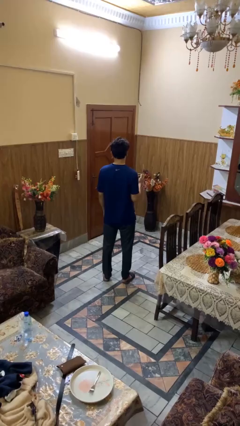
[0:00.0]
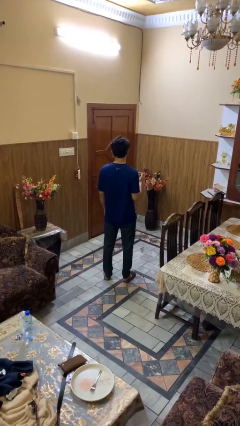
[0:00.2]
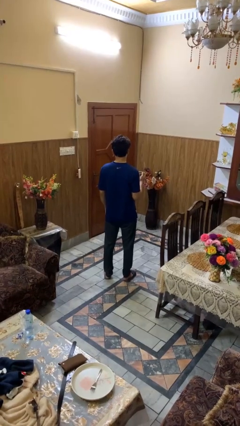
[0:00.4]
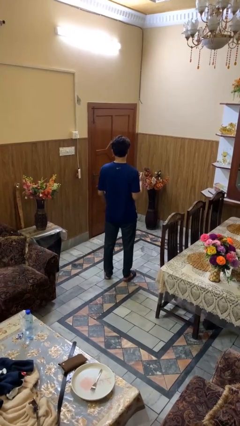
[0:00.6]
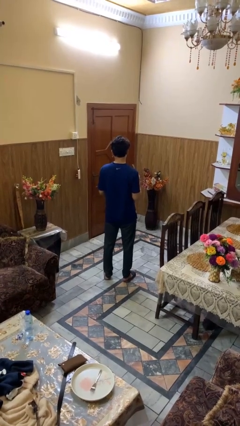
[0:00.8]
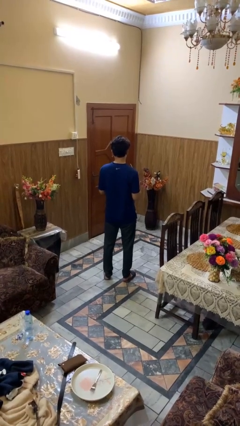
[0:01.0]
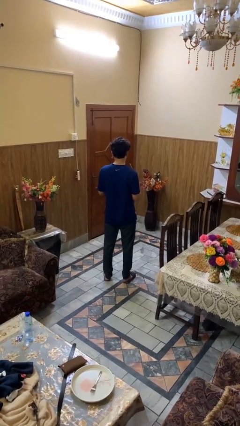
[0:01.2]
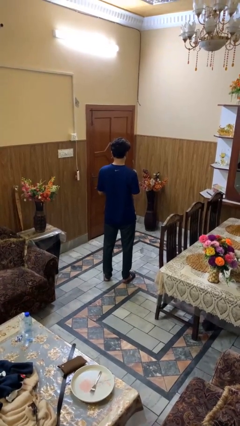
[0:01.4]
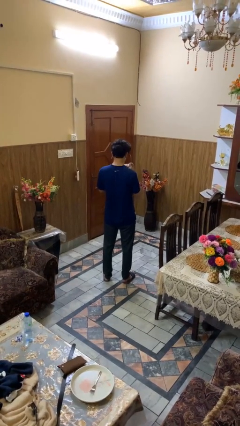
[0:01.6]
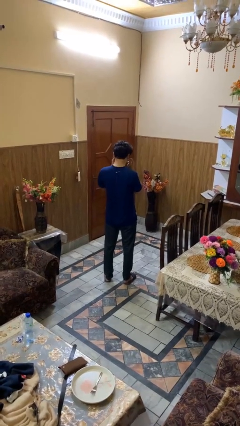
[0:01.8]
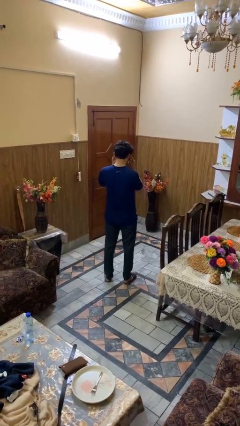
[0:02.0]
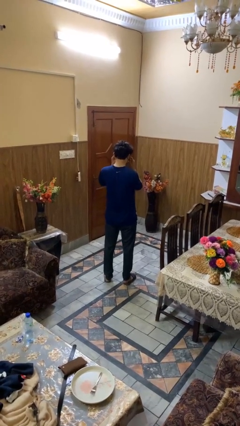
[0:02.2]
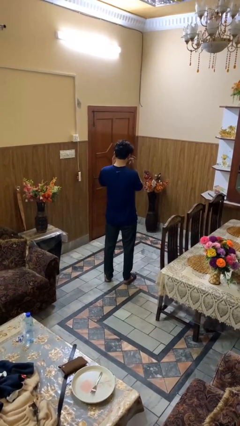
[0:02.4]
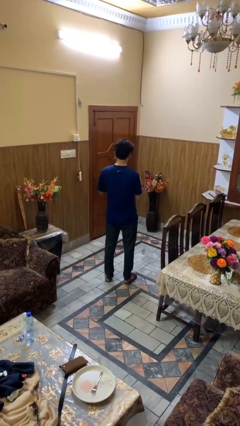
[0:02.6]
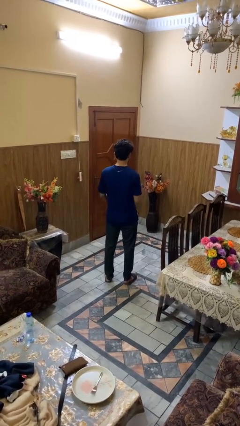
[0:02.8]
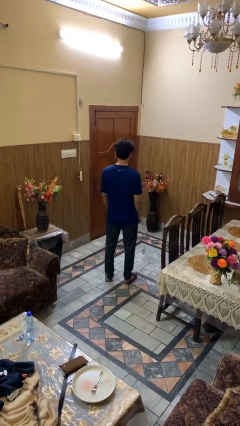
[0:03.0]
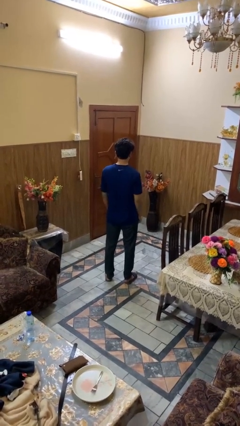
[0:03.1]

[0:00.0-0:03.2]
person puts on sunglasses

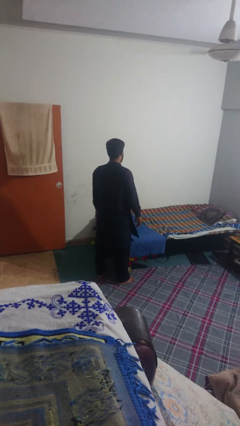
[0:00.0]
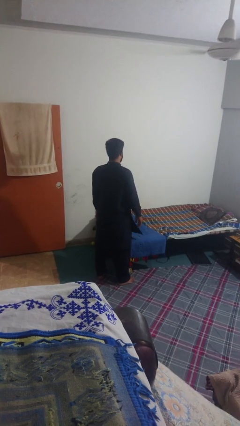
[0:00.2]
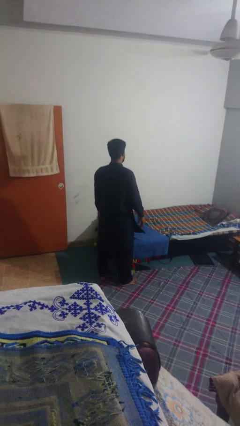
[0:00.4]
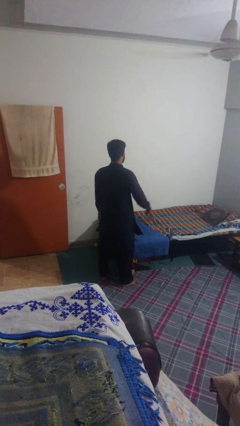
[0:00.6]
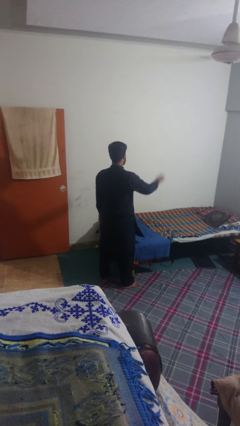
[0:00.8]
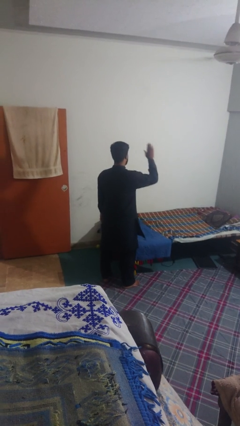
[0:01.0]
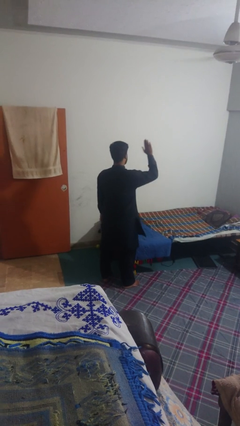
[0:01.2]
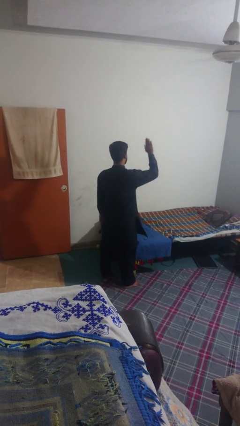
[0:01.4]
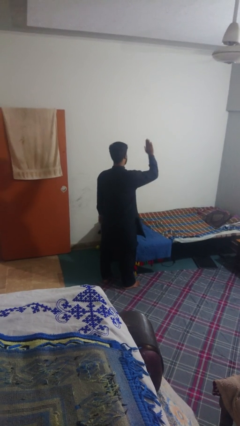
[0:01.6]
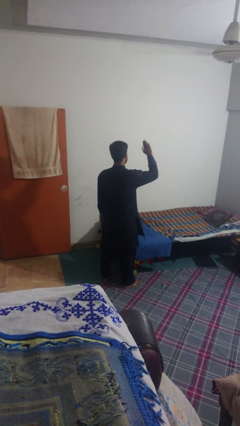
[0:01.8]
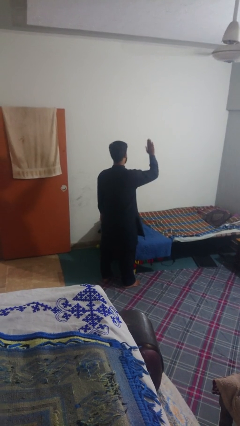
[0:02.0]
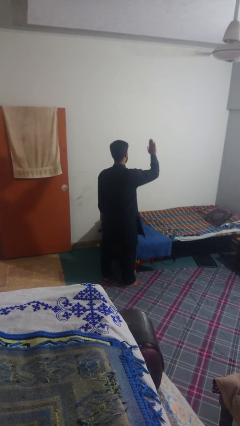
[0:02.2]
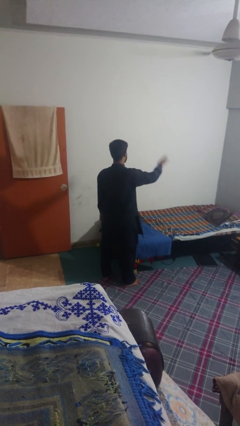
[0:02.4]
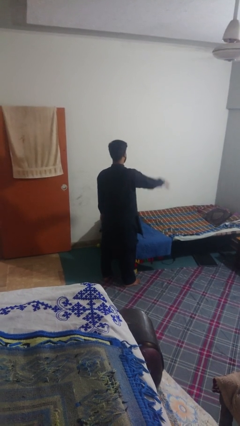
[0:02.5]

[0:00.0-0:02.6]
person gestures stop

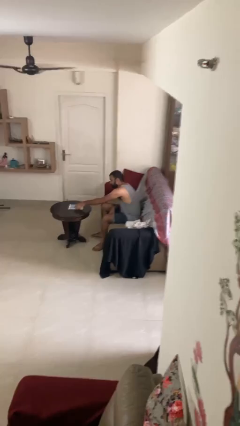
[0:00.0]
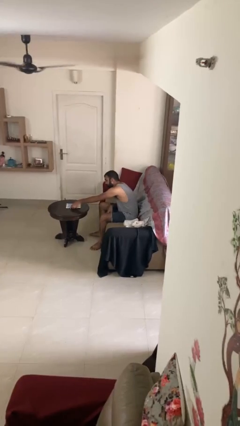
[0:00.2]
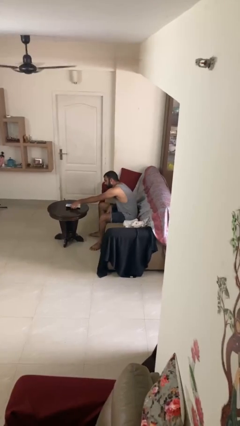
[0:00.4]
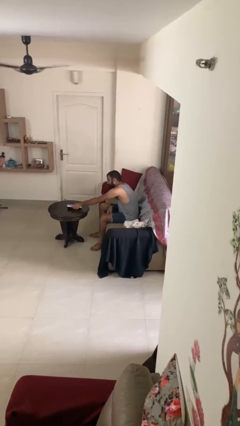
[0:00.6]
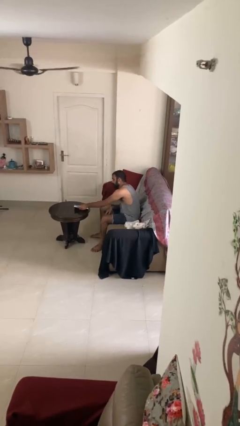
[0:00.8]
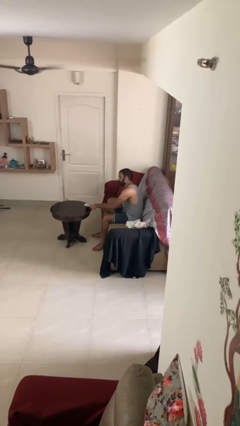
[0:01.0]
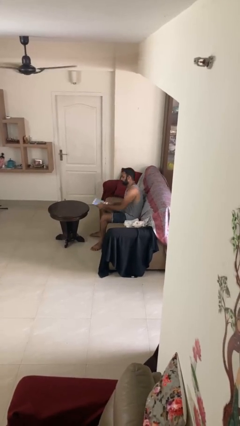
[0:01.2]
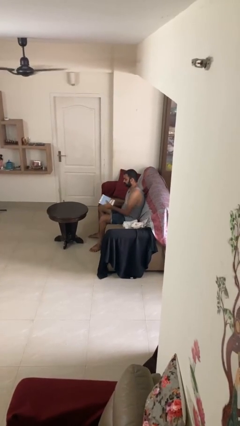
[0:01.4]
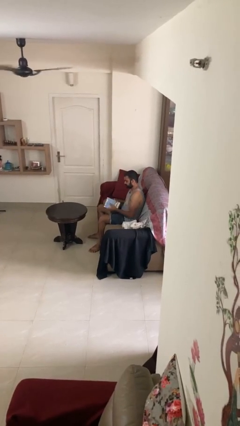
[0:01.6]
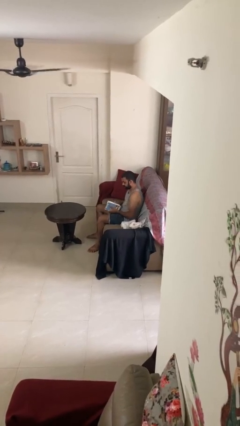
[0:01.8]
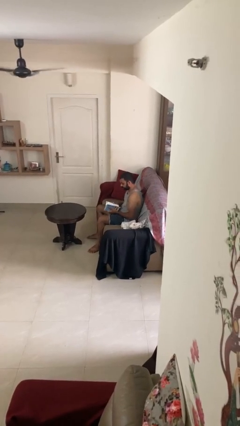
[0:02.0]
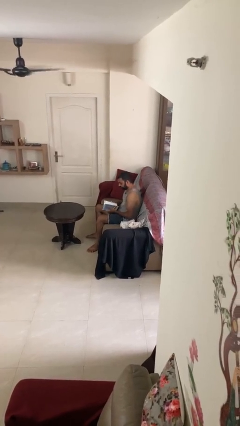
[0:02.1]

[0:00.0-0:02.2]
person picks up object from table

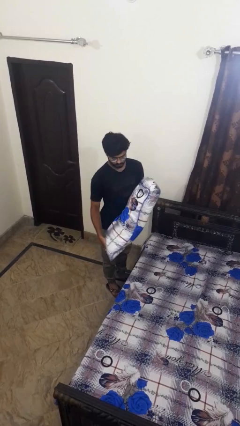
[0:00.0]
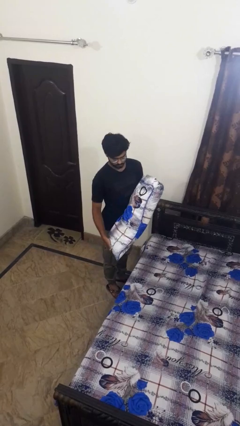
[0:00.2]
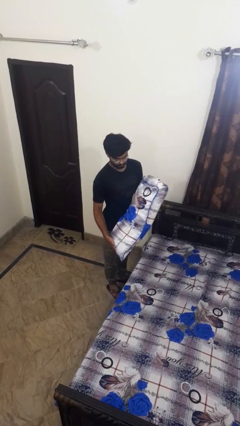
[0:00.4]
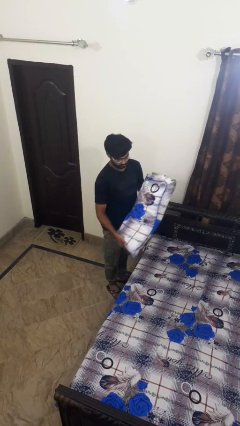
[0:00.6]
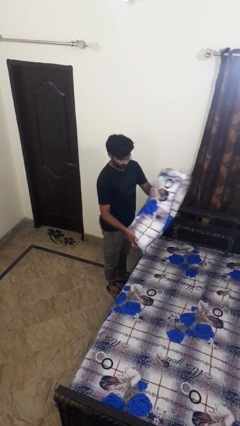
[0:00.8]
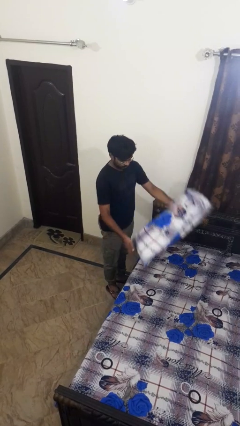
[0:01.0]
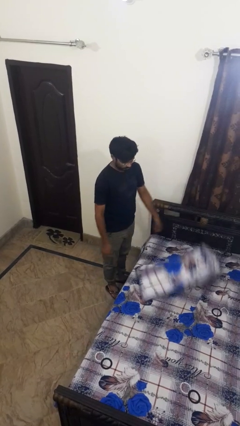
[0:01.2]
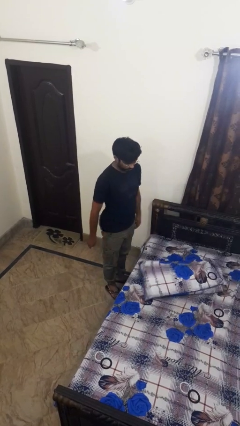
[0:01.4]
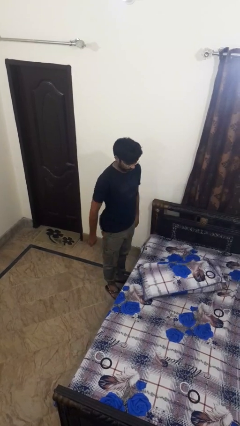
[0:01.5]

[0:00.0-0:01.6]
person puts down object on bed

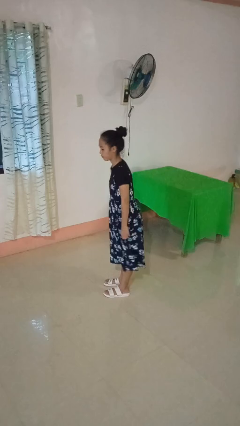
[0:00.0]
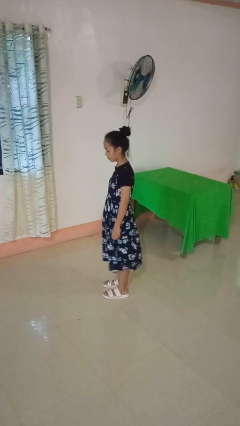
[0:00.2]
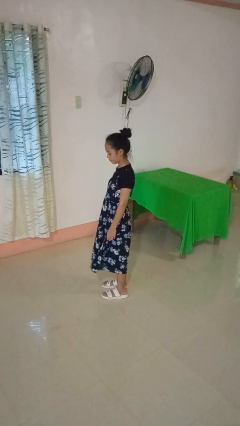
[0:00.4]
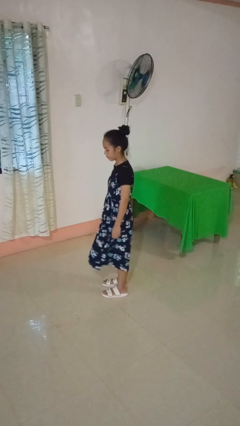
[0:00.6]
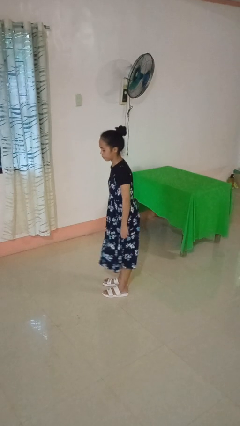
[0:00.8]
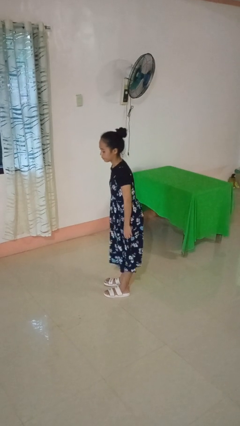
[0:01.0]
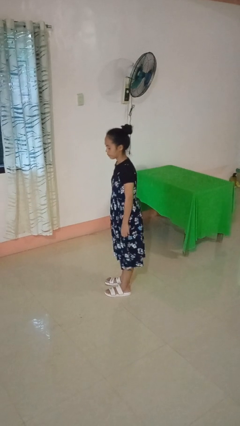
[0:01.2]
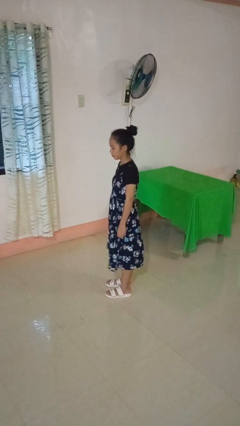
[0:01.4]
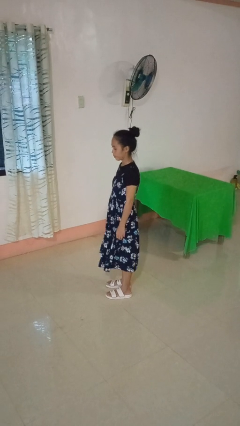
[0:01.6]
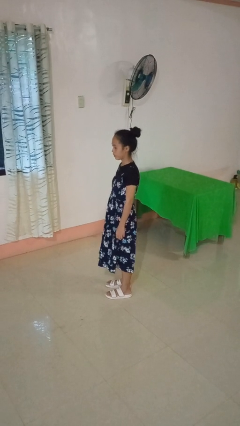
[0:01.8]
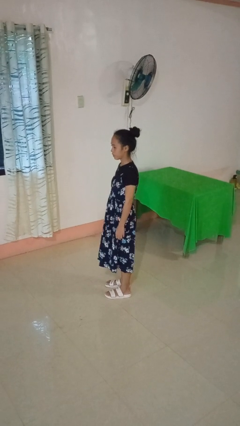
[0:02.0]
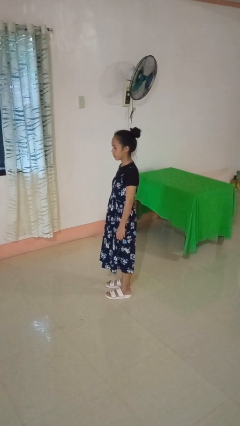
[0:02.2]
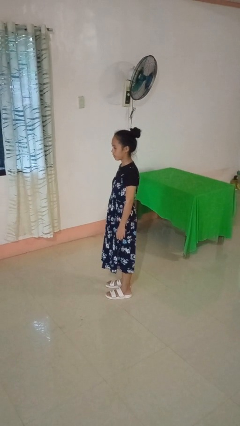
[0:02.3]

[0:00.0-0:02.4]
person wiggles hips

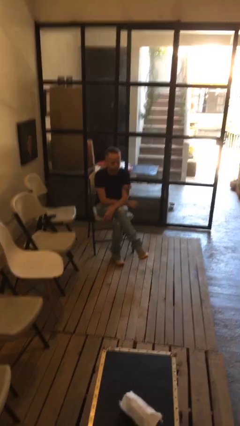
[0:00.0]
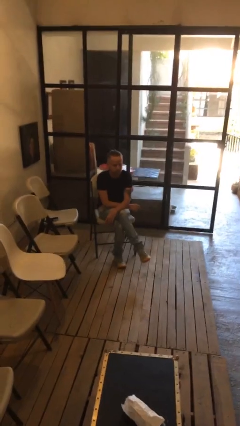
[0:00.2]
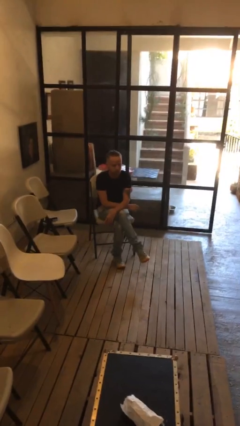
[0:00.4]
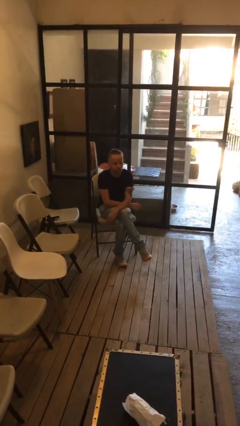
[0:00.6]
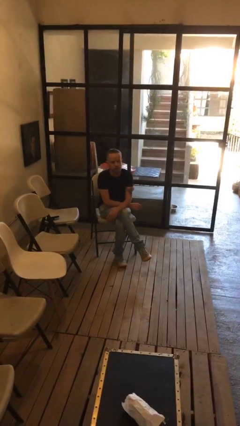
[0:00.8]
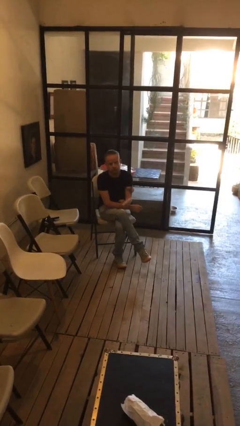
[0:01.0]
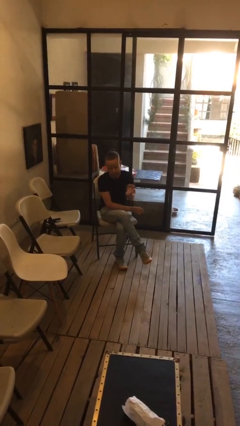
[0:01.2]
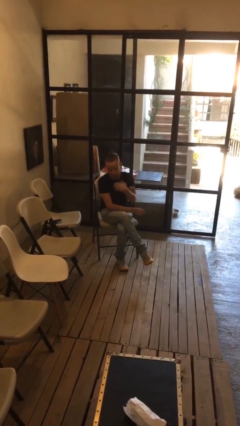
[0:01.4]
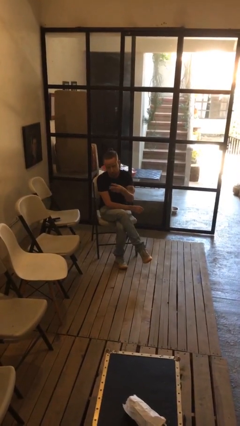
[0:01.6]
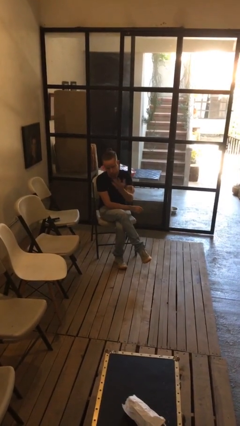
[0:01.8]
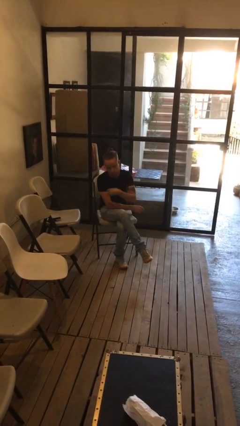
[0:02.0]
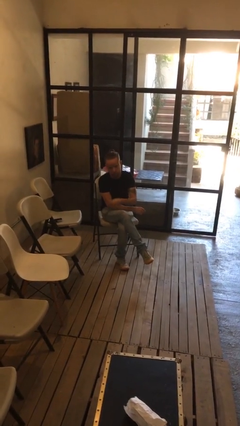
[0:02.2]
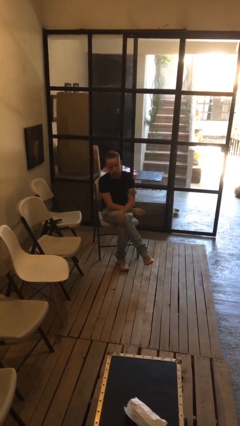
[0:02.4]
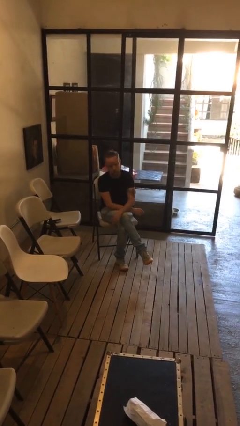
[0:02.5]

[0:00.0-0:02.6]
person gestures come here

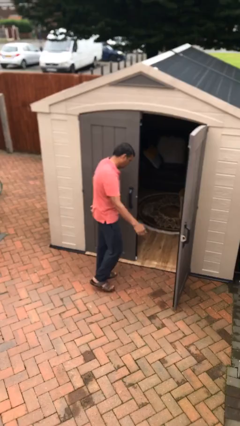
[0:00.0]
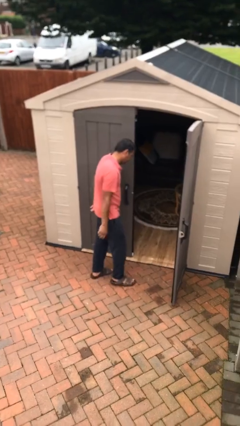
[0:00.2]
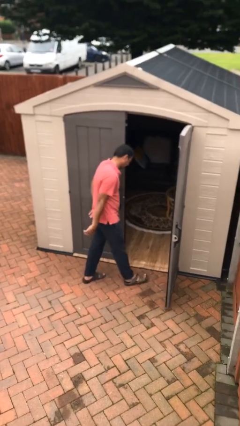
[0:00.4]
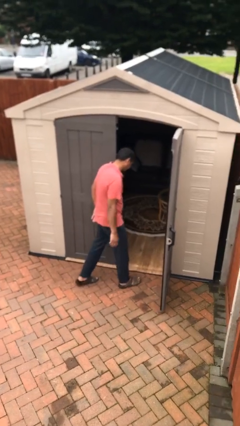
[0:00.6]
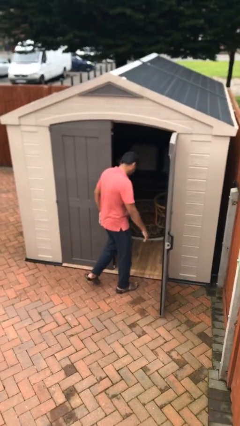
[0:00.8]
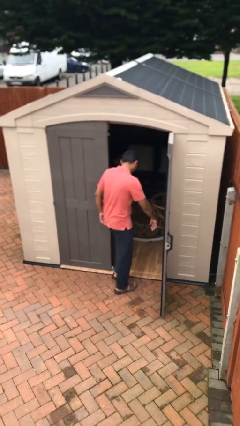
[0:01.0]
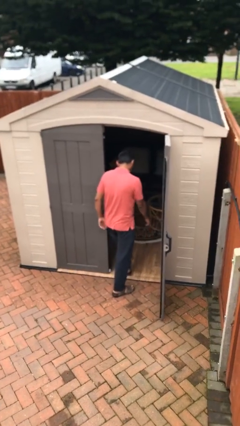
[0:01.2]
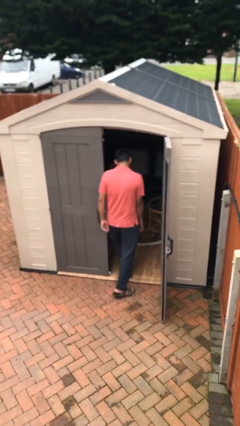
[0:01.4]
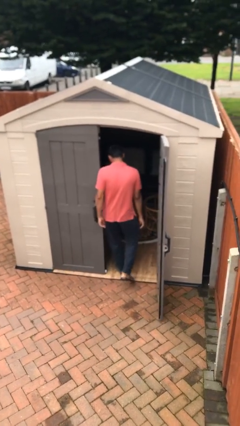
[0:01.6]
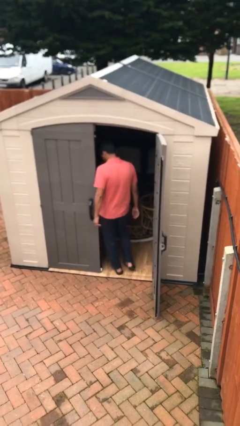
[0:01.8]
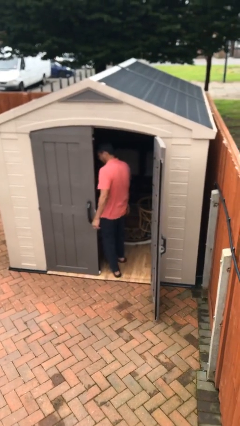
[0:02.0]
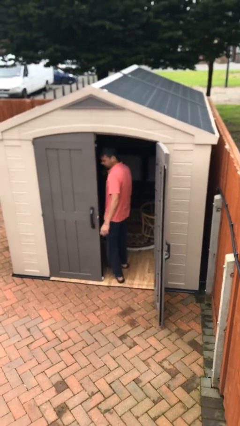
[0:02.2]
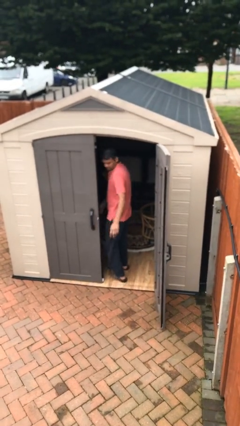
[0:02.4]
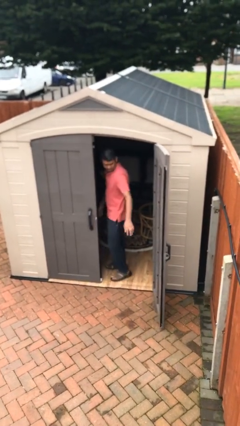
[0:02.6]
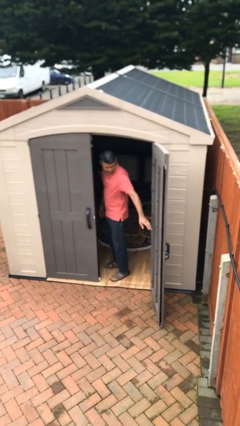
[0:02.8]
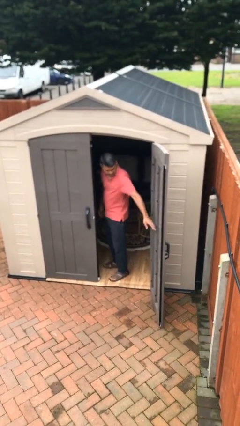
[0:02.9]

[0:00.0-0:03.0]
person exits scene through structure
